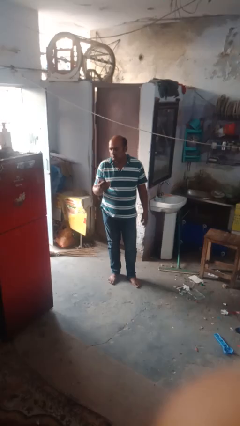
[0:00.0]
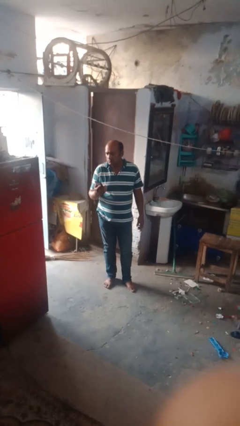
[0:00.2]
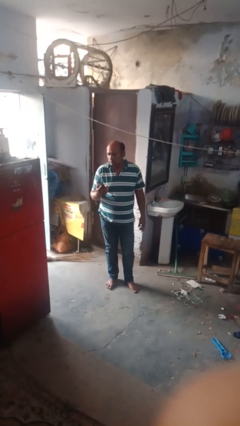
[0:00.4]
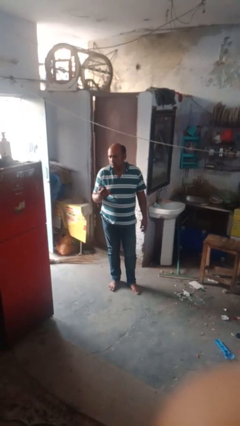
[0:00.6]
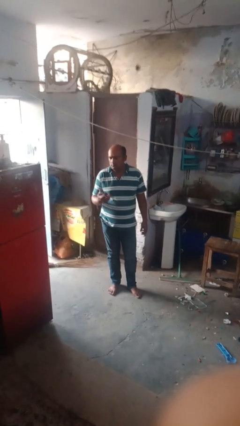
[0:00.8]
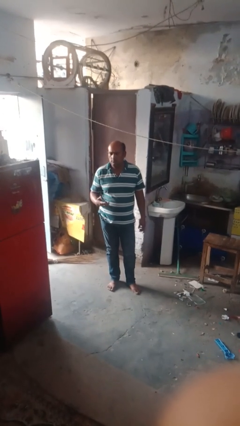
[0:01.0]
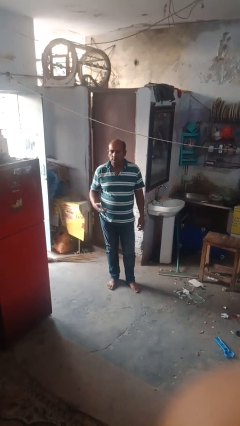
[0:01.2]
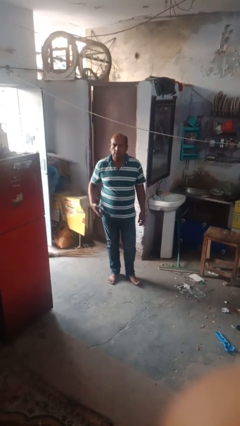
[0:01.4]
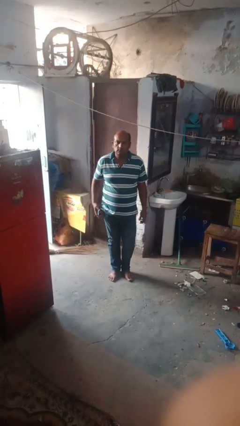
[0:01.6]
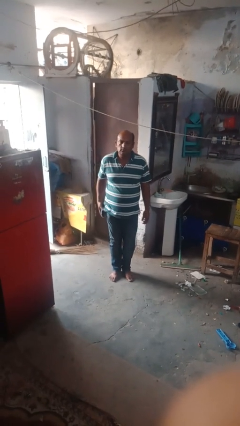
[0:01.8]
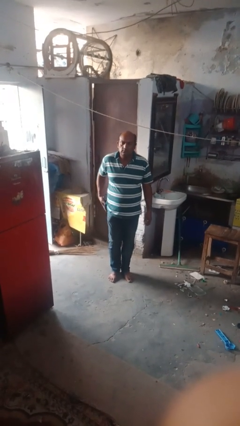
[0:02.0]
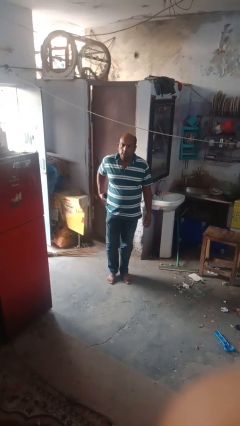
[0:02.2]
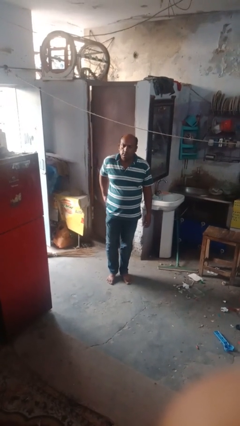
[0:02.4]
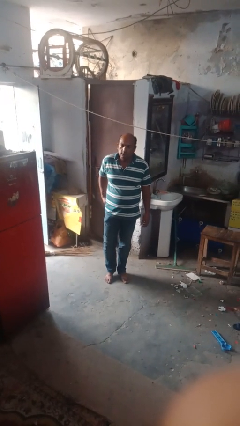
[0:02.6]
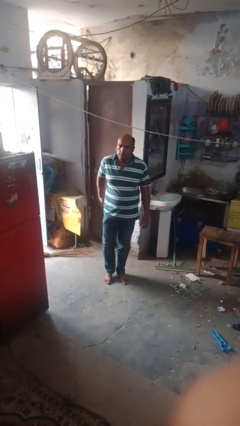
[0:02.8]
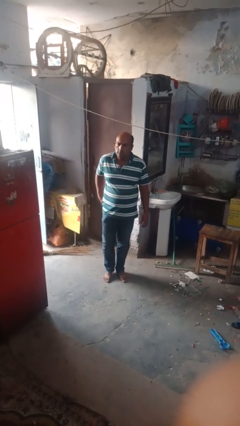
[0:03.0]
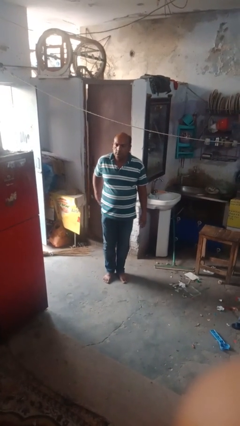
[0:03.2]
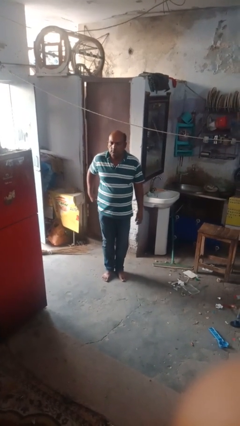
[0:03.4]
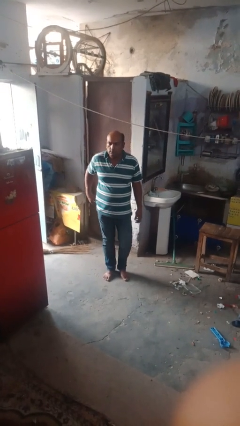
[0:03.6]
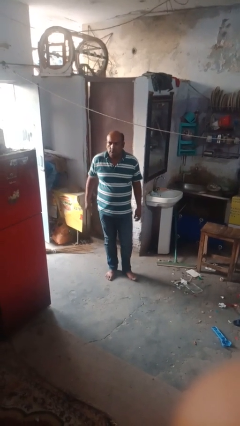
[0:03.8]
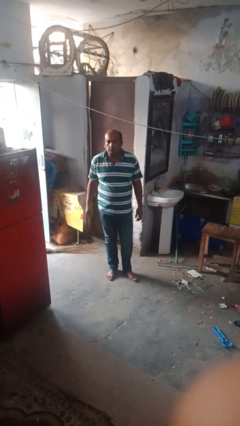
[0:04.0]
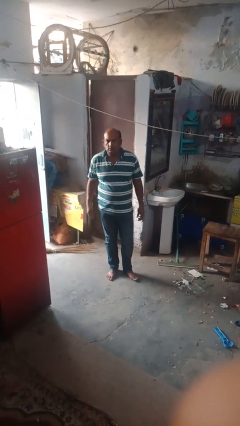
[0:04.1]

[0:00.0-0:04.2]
person puts phone into pocket

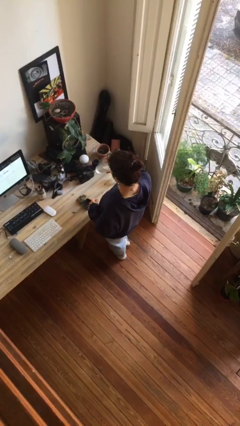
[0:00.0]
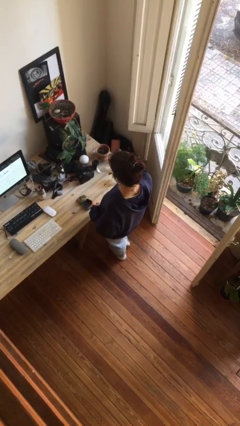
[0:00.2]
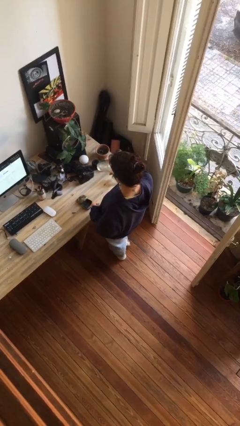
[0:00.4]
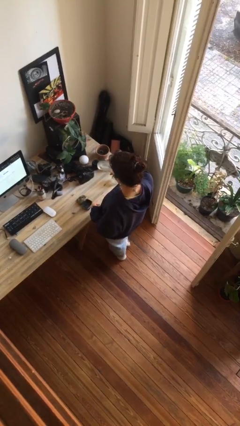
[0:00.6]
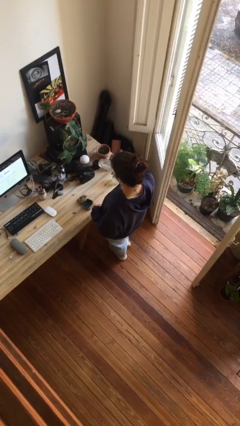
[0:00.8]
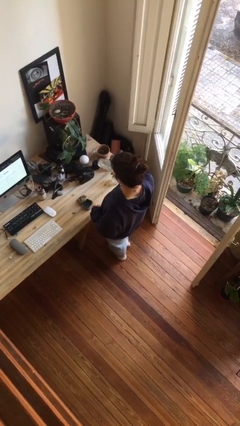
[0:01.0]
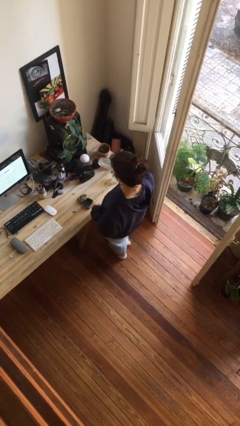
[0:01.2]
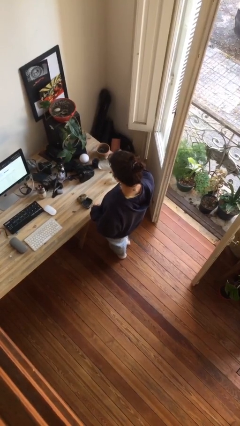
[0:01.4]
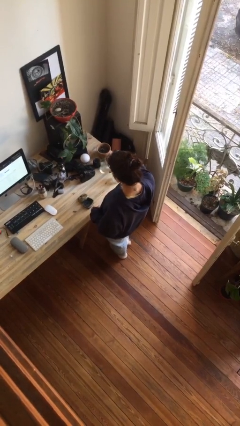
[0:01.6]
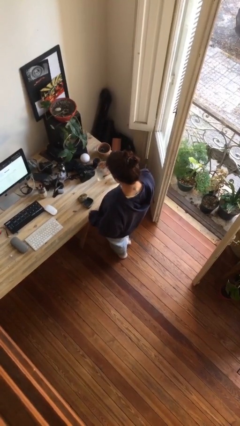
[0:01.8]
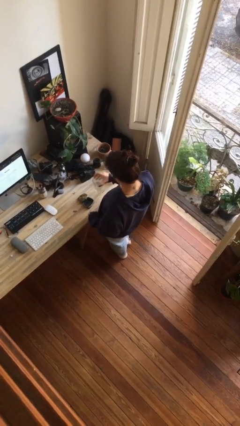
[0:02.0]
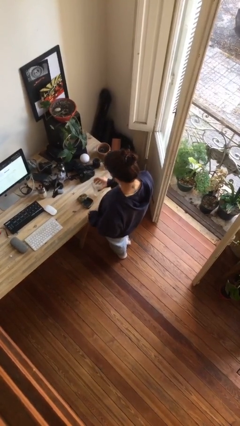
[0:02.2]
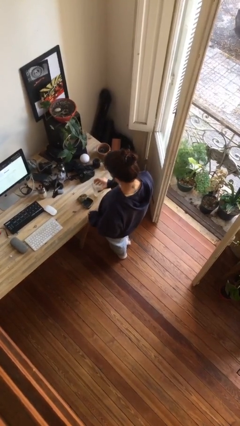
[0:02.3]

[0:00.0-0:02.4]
person drinks from cup

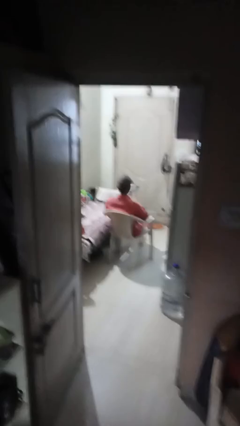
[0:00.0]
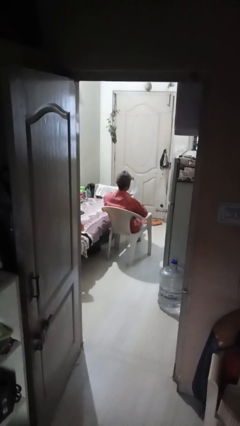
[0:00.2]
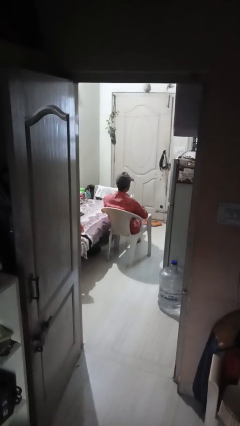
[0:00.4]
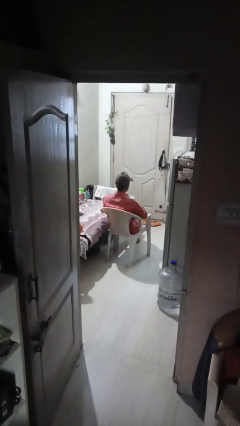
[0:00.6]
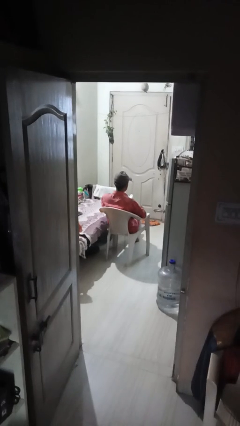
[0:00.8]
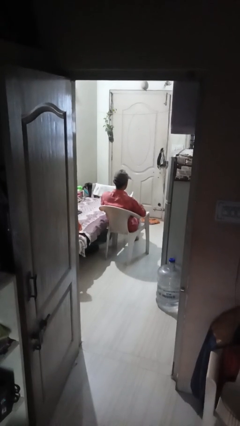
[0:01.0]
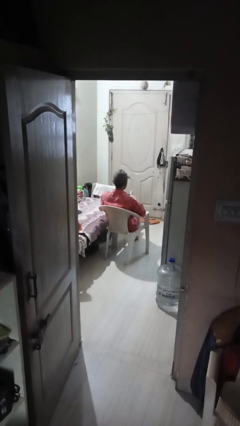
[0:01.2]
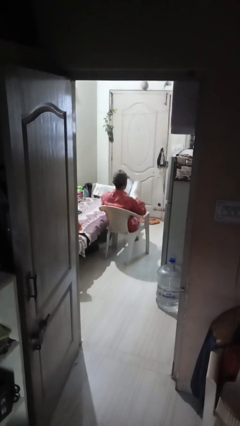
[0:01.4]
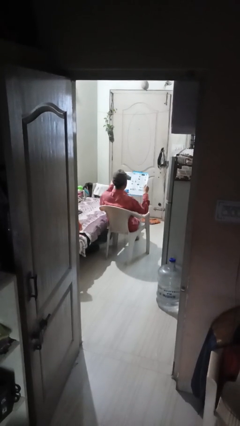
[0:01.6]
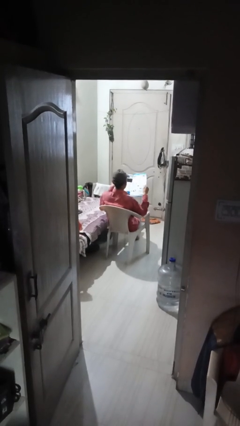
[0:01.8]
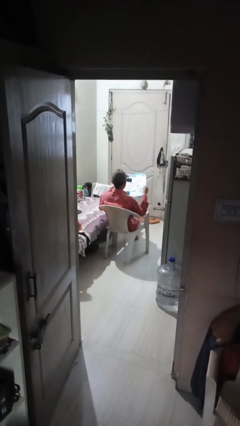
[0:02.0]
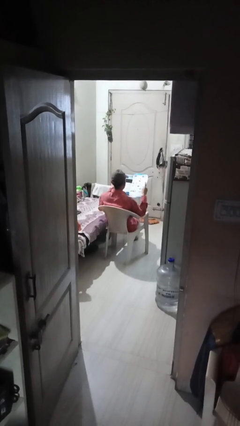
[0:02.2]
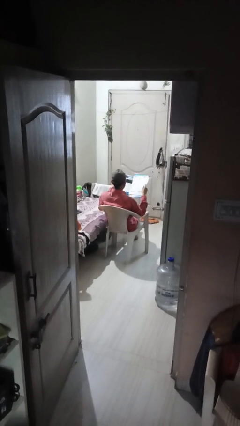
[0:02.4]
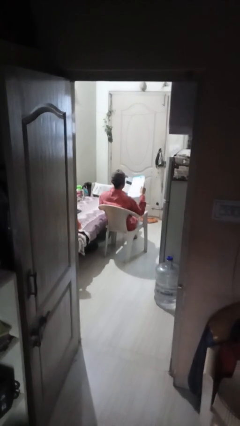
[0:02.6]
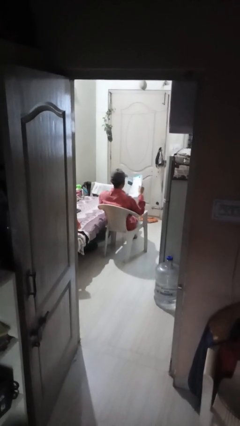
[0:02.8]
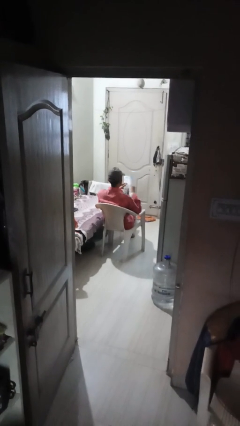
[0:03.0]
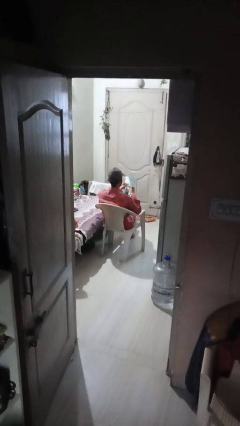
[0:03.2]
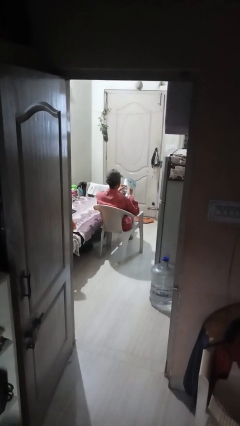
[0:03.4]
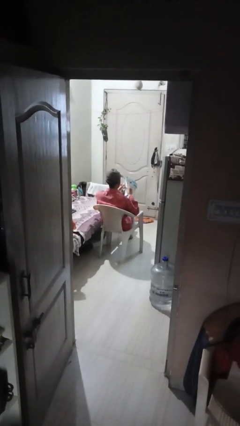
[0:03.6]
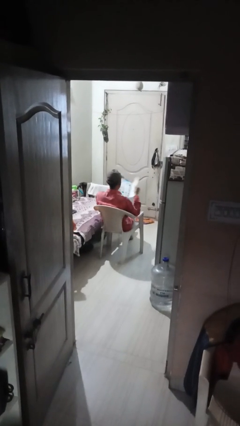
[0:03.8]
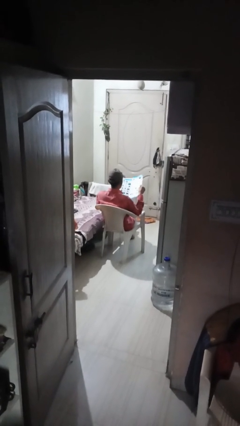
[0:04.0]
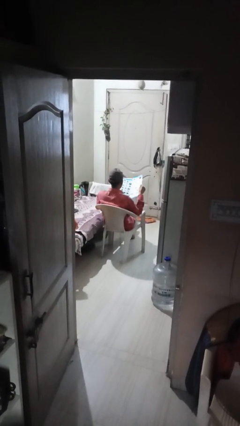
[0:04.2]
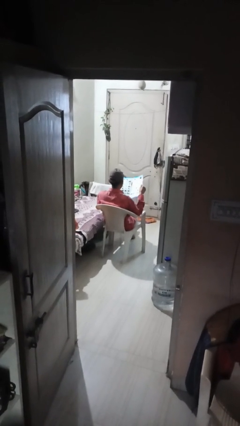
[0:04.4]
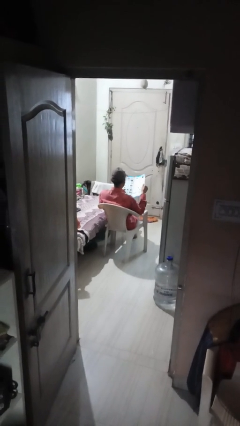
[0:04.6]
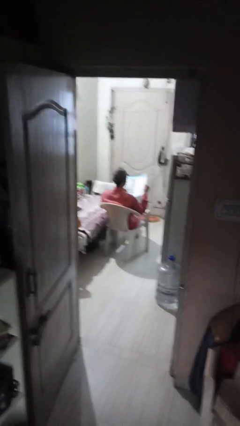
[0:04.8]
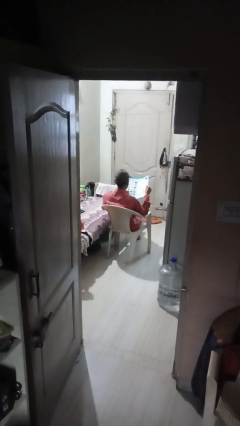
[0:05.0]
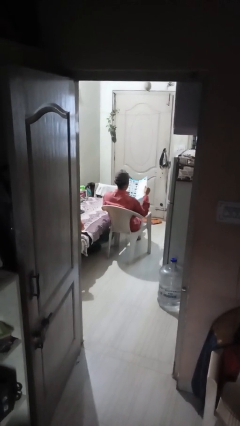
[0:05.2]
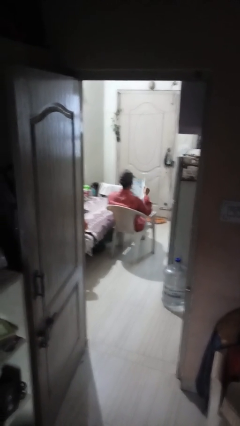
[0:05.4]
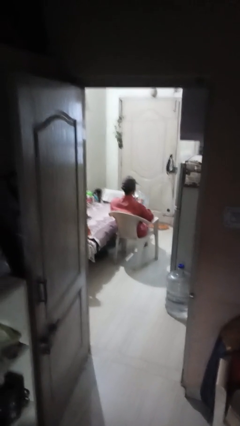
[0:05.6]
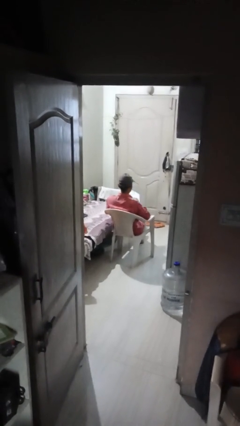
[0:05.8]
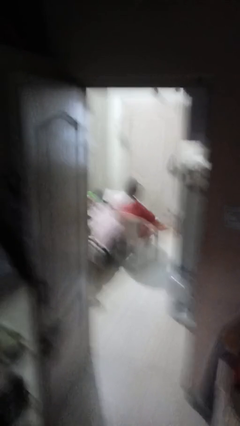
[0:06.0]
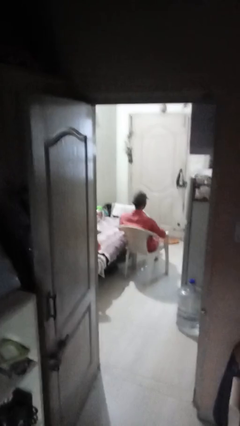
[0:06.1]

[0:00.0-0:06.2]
person reads magazine

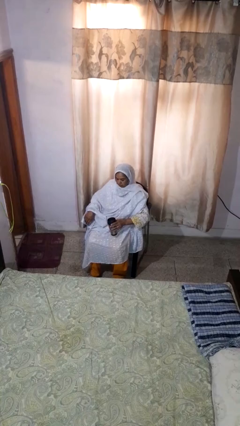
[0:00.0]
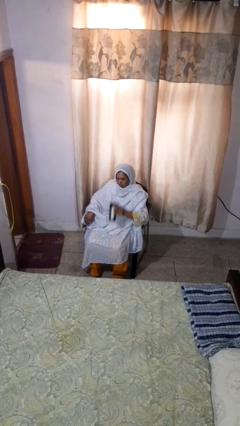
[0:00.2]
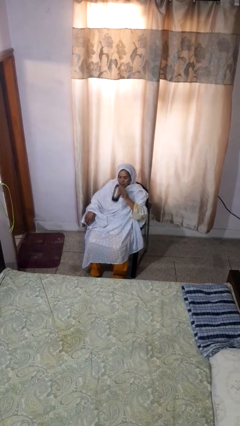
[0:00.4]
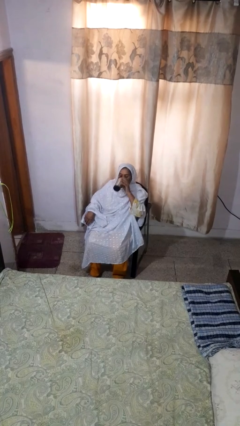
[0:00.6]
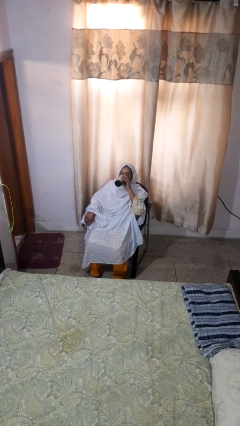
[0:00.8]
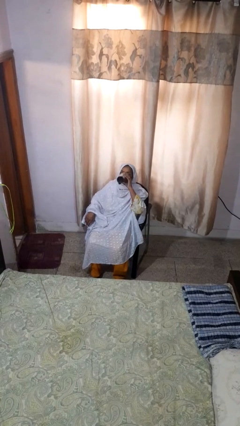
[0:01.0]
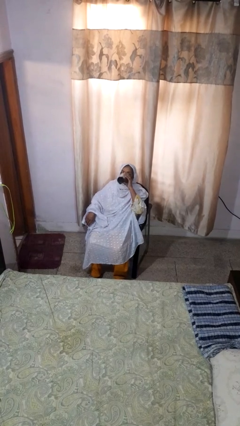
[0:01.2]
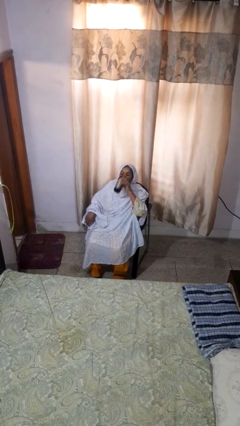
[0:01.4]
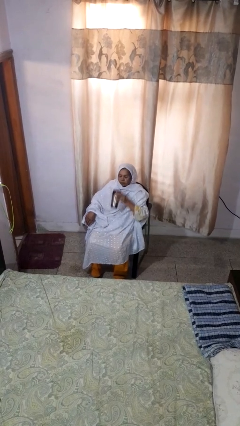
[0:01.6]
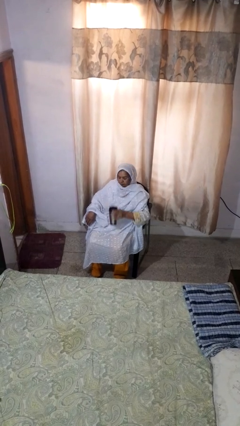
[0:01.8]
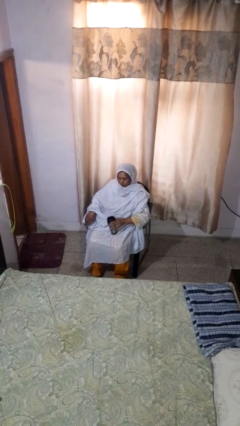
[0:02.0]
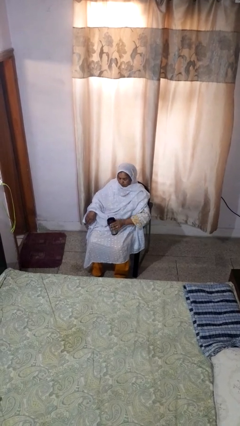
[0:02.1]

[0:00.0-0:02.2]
person drinks from beverage can

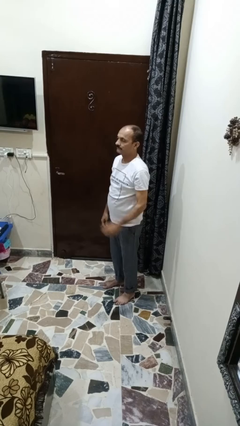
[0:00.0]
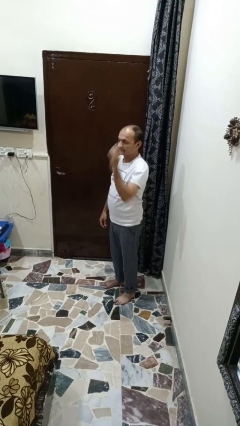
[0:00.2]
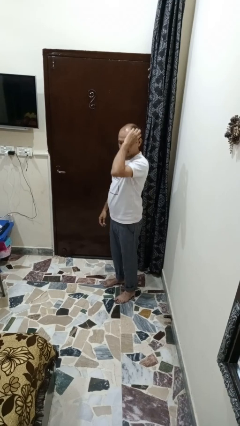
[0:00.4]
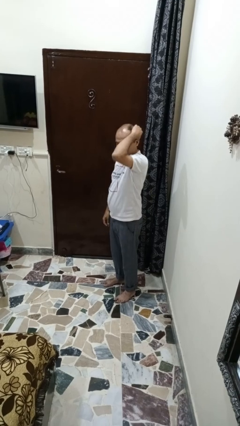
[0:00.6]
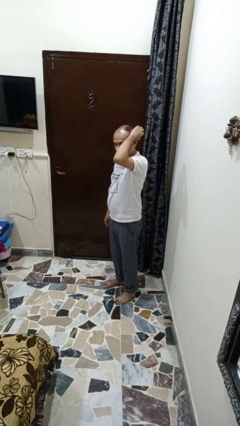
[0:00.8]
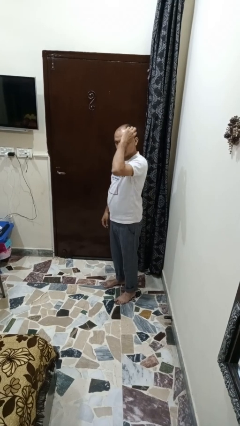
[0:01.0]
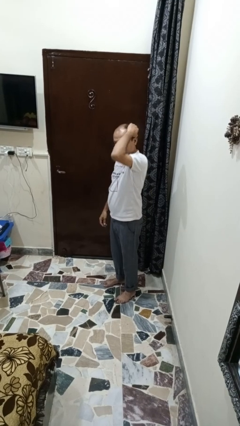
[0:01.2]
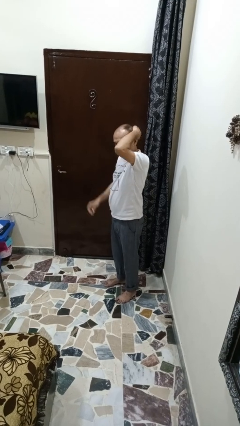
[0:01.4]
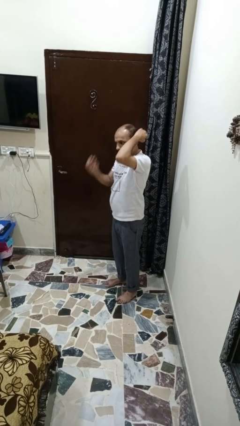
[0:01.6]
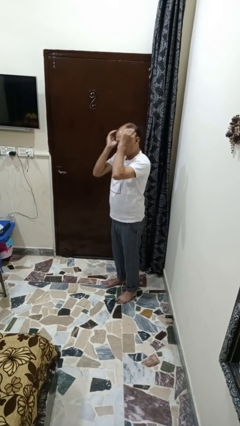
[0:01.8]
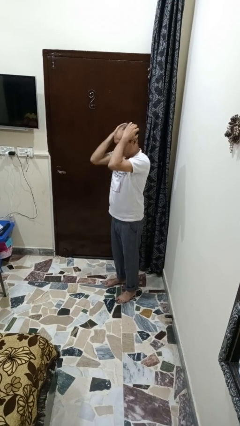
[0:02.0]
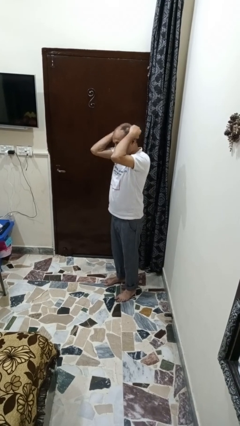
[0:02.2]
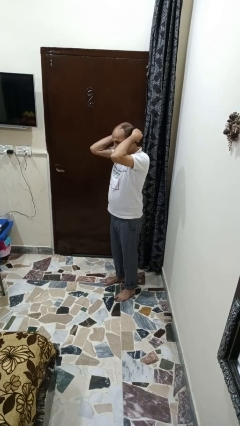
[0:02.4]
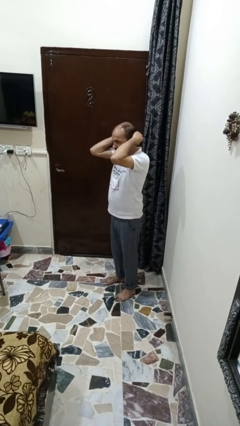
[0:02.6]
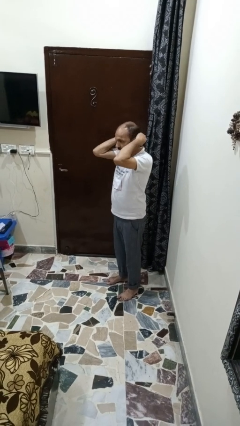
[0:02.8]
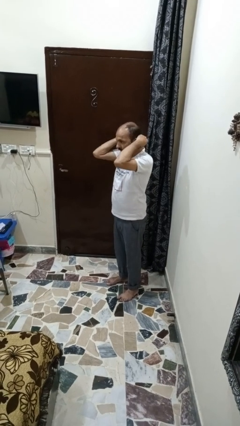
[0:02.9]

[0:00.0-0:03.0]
person strokes hair
